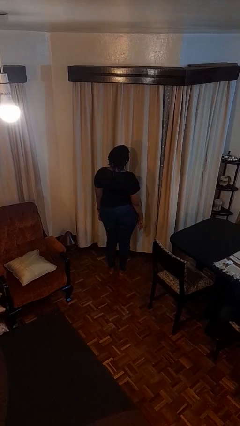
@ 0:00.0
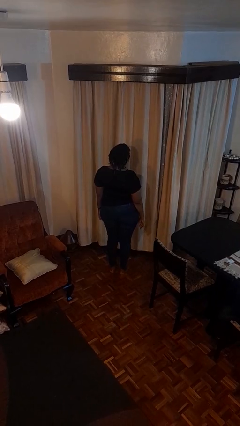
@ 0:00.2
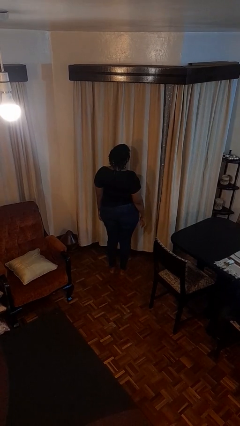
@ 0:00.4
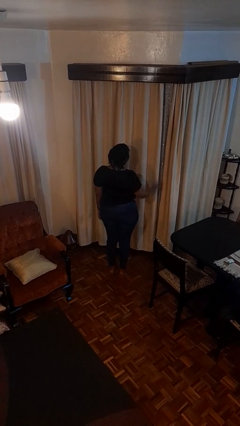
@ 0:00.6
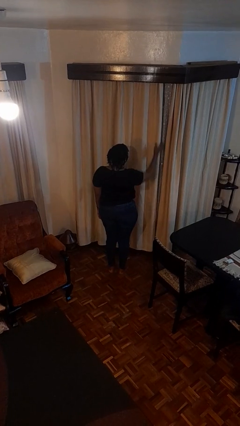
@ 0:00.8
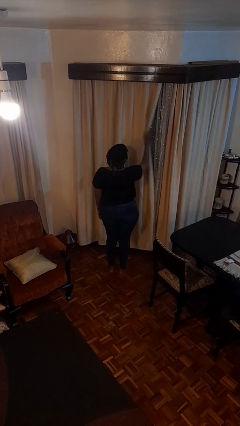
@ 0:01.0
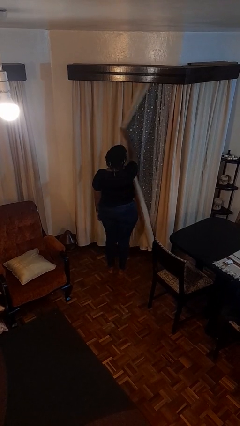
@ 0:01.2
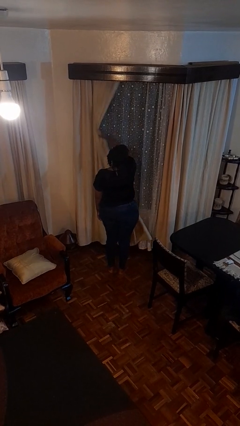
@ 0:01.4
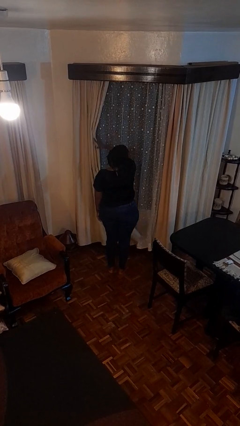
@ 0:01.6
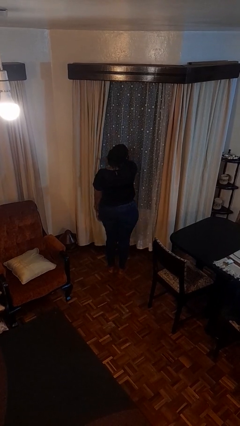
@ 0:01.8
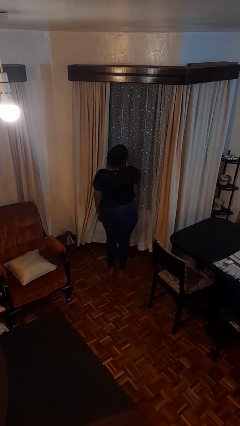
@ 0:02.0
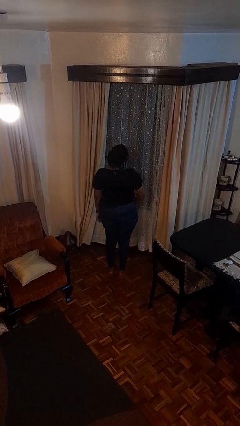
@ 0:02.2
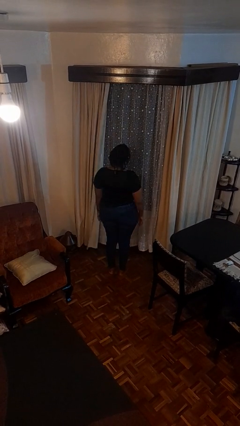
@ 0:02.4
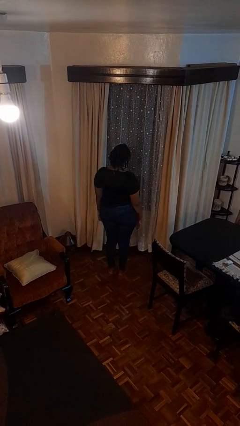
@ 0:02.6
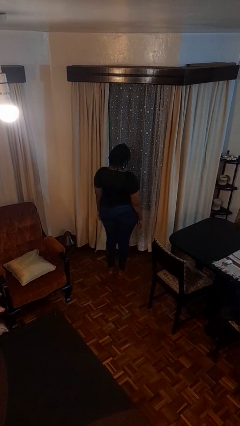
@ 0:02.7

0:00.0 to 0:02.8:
person opens curtains

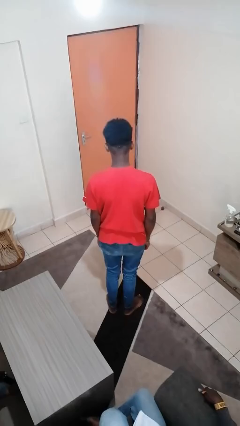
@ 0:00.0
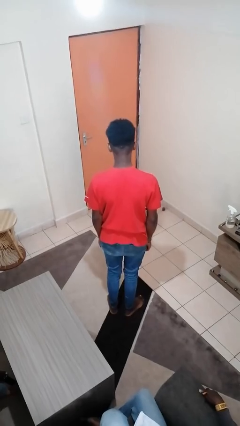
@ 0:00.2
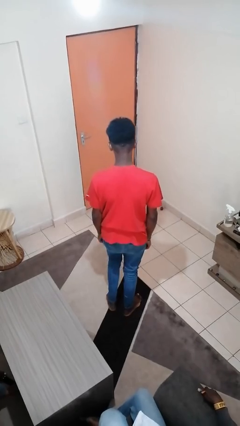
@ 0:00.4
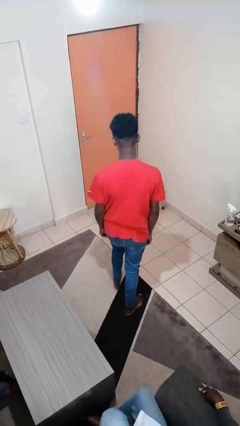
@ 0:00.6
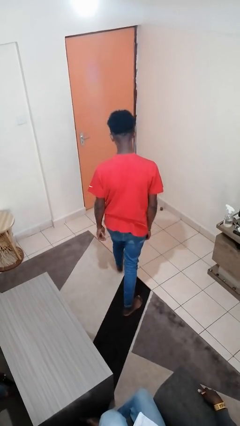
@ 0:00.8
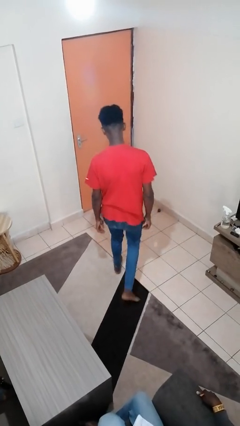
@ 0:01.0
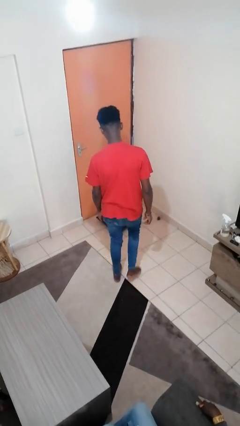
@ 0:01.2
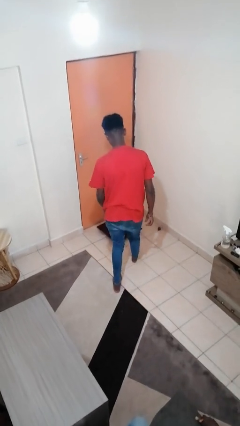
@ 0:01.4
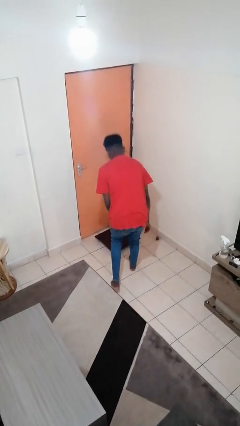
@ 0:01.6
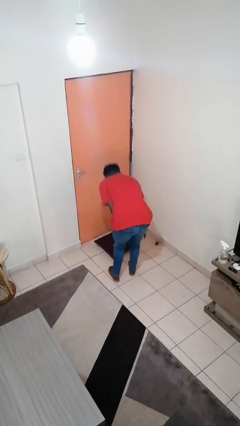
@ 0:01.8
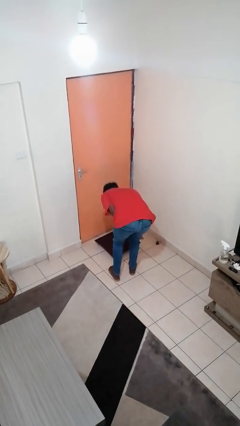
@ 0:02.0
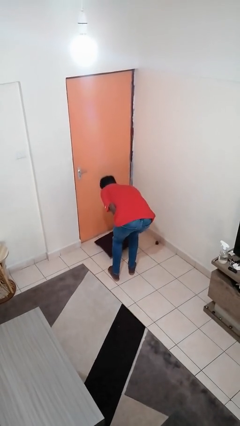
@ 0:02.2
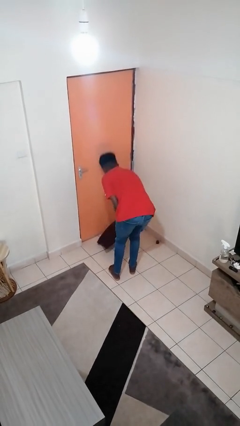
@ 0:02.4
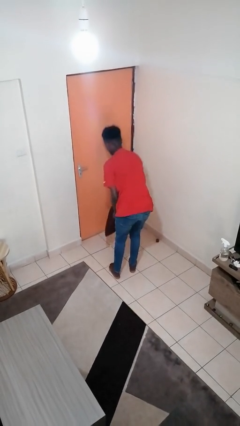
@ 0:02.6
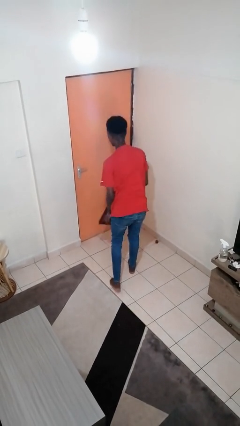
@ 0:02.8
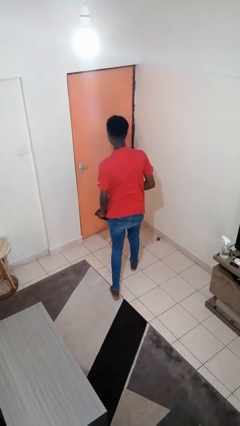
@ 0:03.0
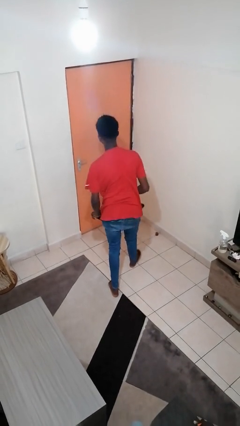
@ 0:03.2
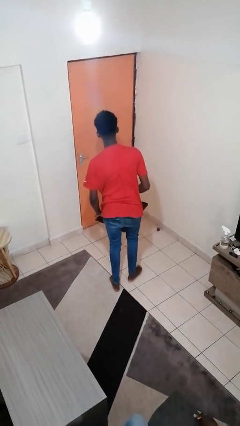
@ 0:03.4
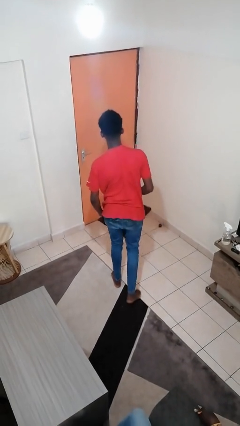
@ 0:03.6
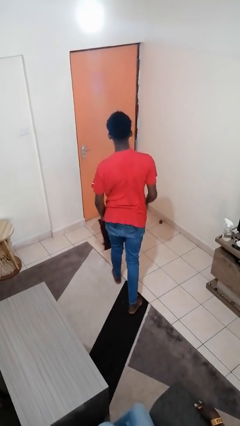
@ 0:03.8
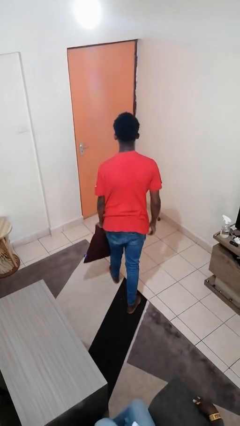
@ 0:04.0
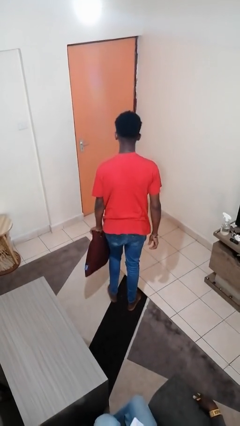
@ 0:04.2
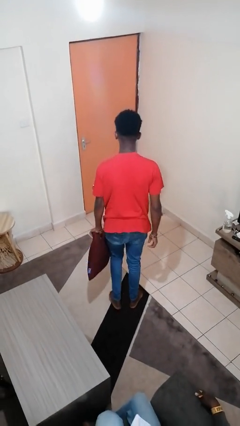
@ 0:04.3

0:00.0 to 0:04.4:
person picks up object from floor

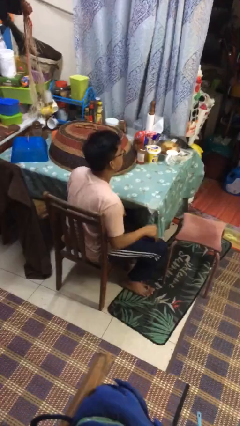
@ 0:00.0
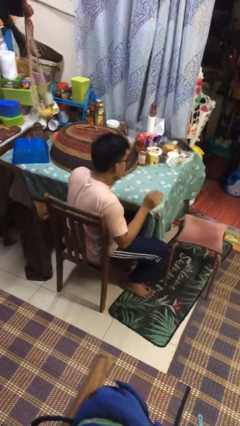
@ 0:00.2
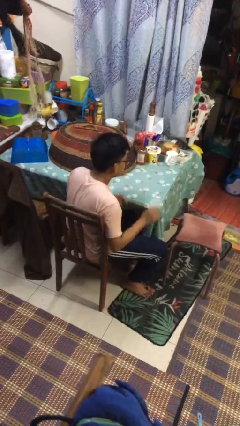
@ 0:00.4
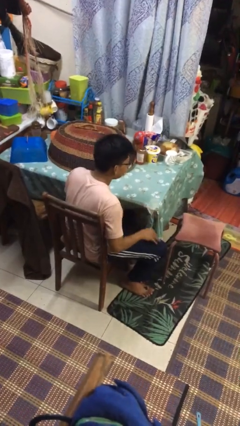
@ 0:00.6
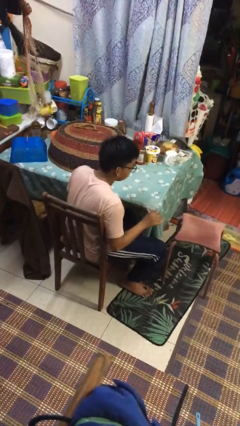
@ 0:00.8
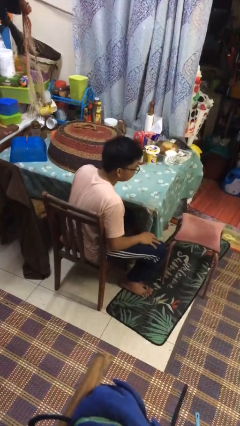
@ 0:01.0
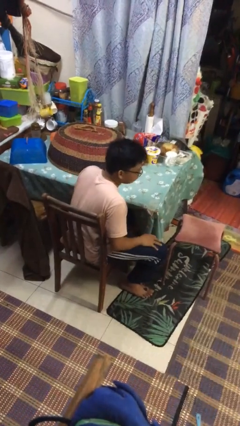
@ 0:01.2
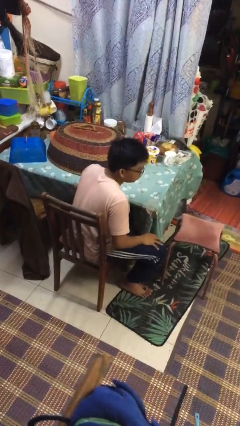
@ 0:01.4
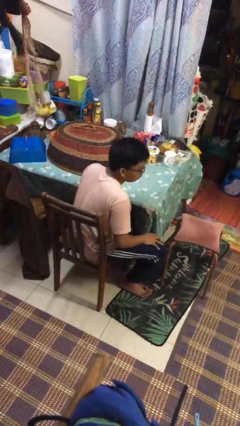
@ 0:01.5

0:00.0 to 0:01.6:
person slaps hands on thighs

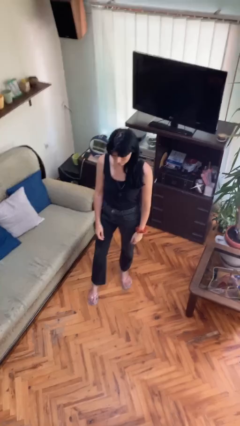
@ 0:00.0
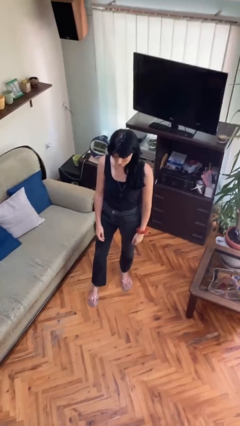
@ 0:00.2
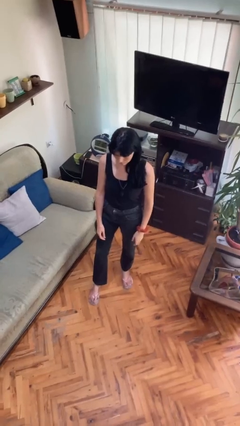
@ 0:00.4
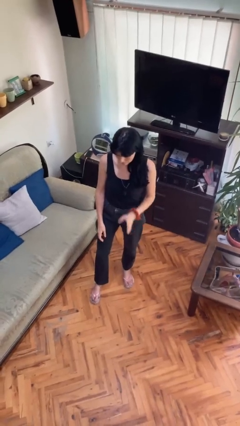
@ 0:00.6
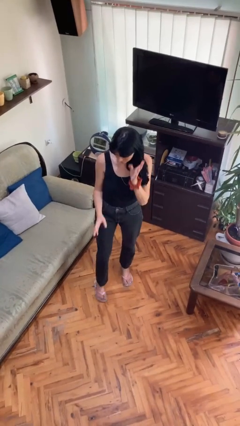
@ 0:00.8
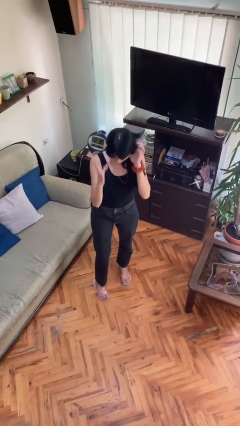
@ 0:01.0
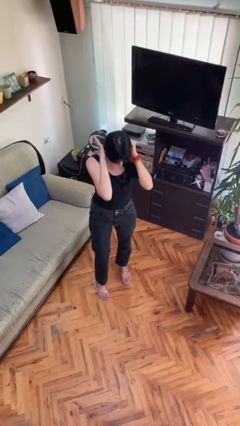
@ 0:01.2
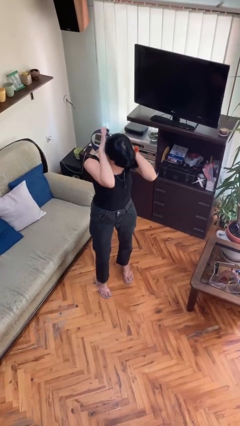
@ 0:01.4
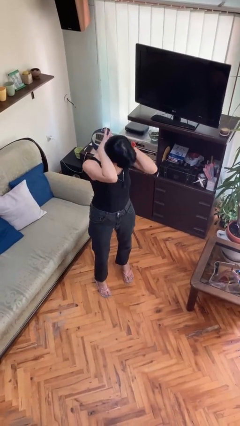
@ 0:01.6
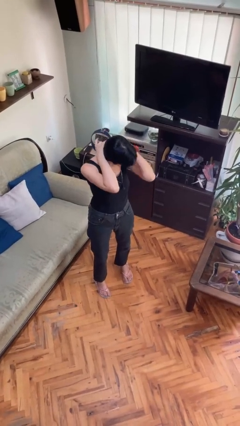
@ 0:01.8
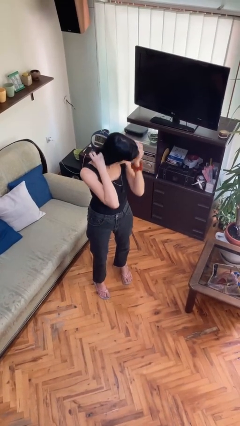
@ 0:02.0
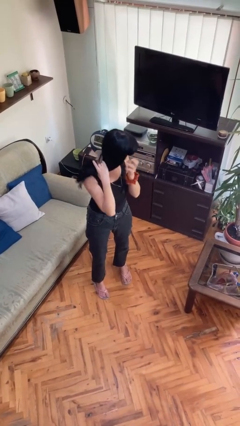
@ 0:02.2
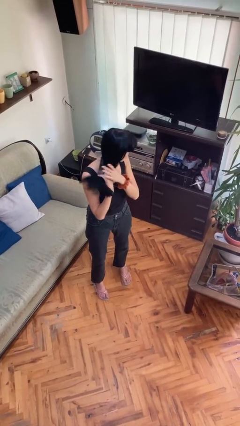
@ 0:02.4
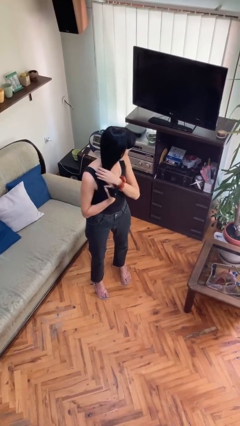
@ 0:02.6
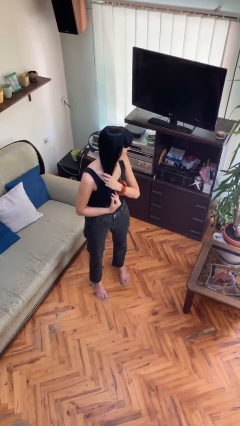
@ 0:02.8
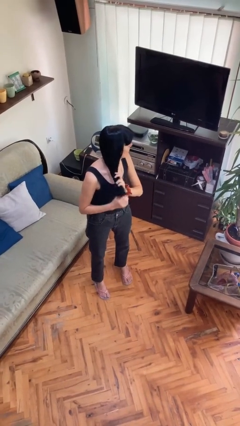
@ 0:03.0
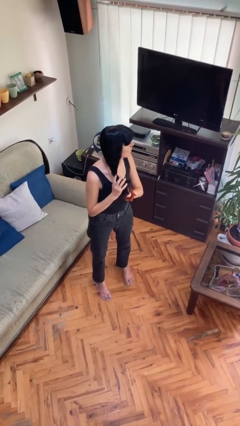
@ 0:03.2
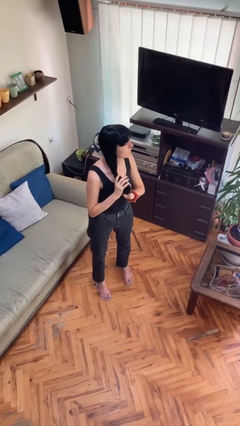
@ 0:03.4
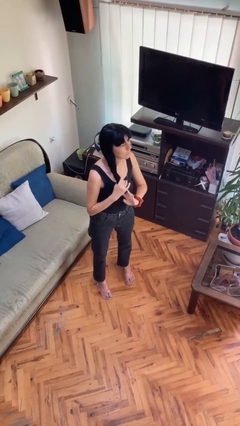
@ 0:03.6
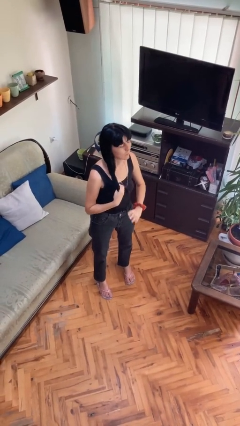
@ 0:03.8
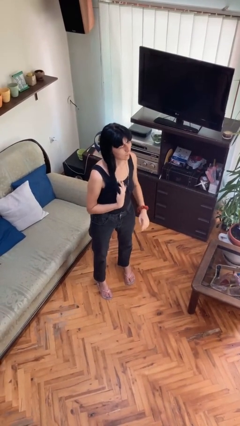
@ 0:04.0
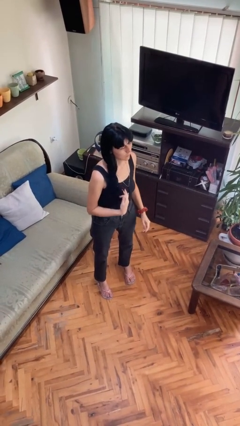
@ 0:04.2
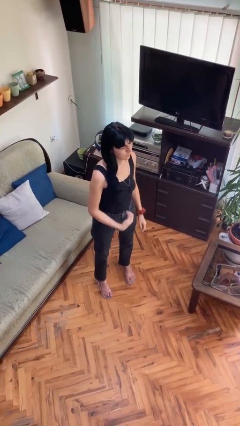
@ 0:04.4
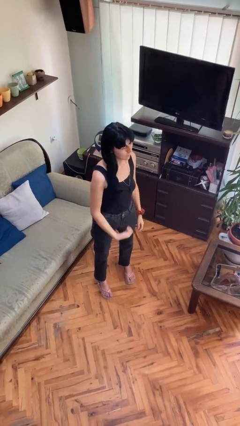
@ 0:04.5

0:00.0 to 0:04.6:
person strokes hair

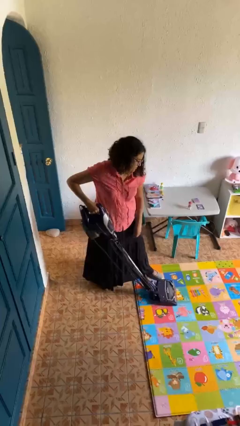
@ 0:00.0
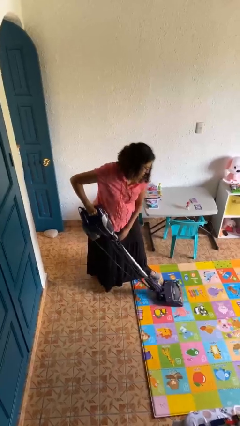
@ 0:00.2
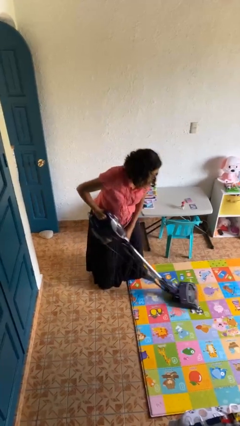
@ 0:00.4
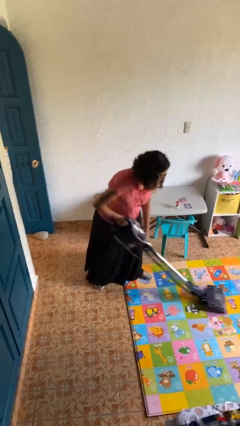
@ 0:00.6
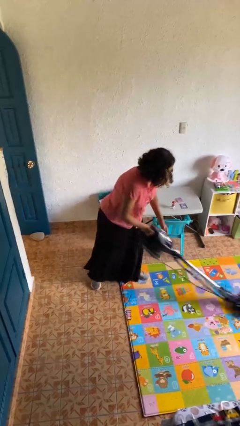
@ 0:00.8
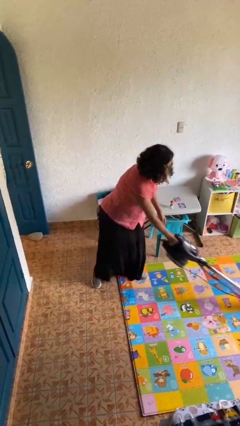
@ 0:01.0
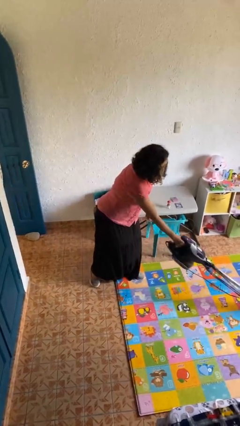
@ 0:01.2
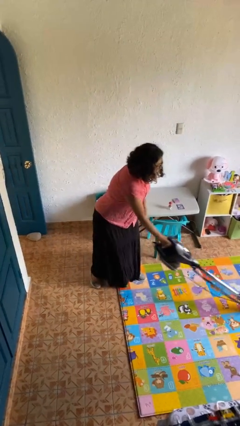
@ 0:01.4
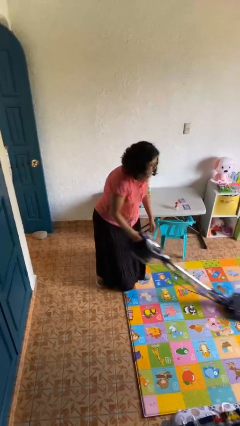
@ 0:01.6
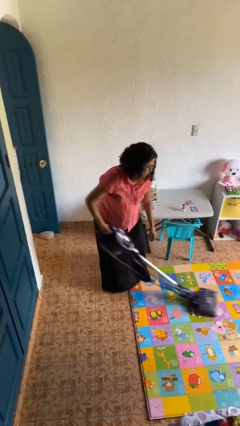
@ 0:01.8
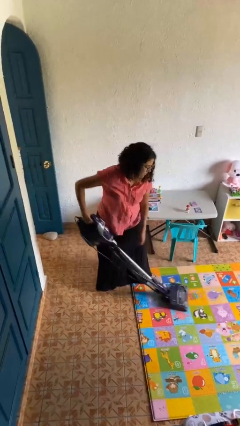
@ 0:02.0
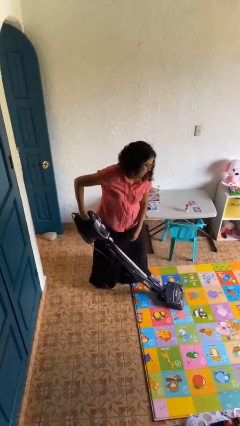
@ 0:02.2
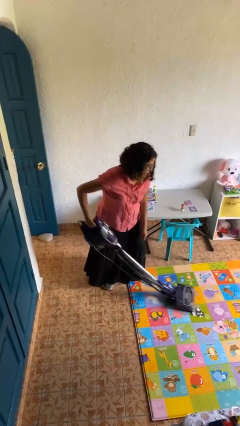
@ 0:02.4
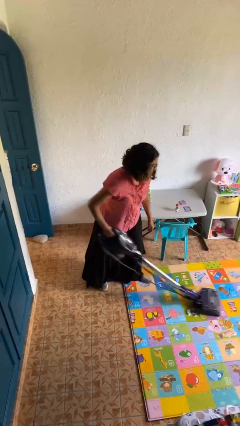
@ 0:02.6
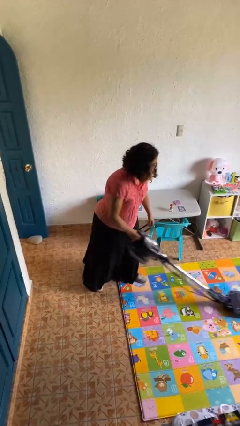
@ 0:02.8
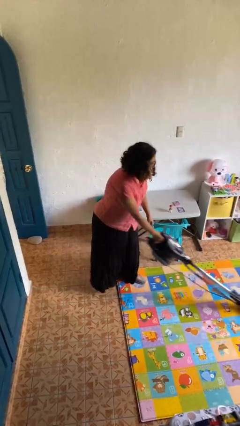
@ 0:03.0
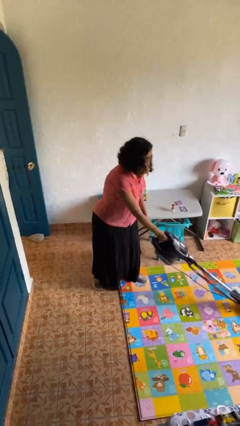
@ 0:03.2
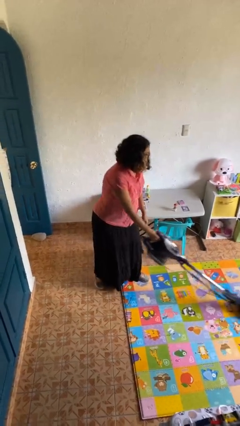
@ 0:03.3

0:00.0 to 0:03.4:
person vacuums carpet

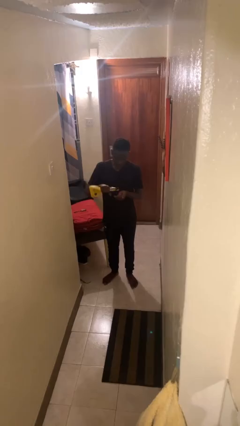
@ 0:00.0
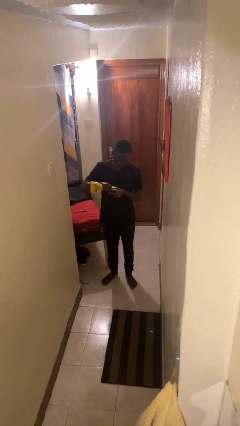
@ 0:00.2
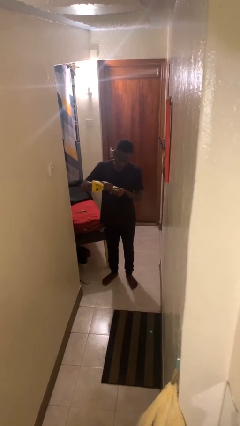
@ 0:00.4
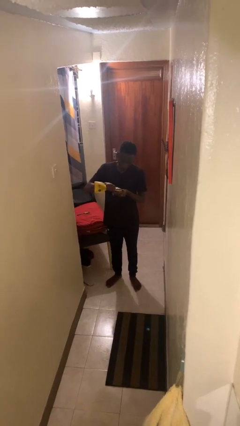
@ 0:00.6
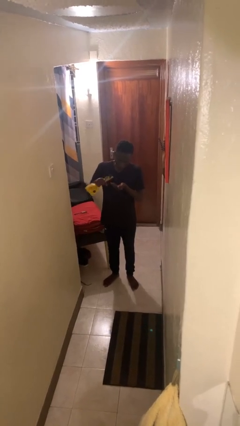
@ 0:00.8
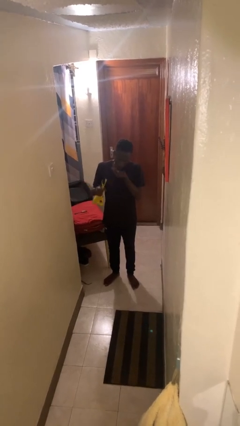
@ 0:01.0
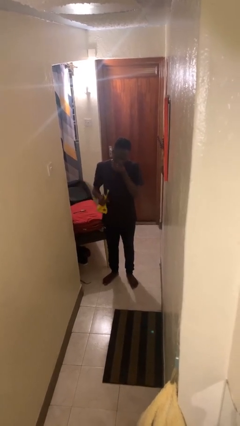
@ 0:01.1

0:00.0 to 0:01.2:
person eats snack from bag
